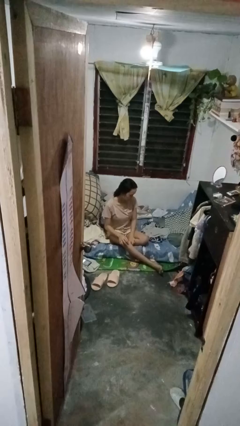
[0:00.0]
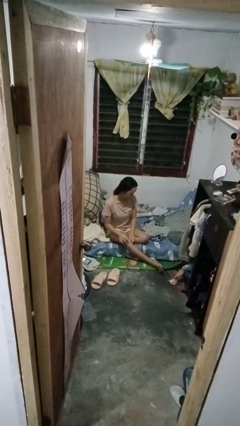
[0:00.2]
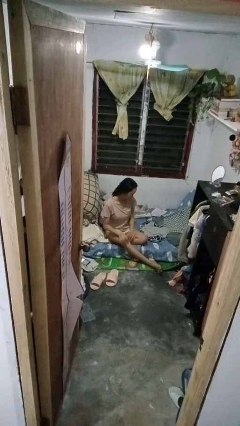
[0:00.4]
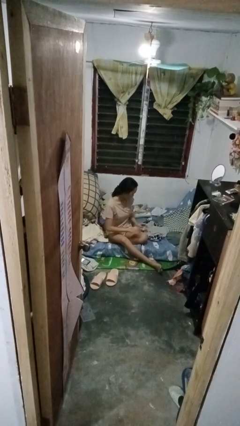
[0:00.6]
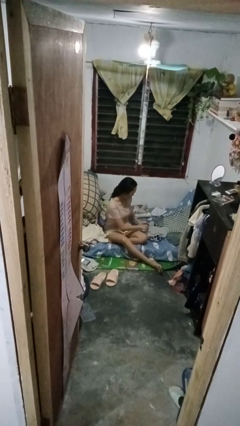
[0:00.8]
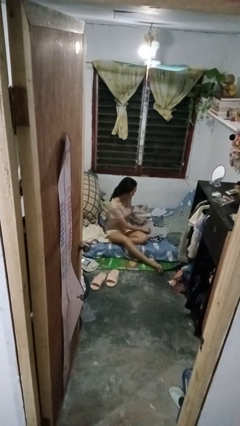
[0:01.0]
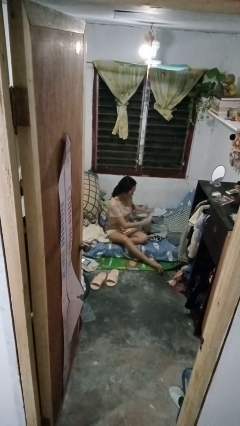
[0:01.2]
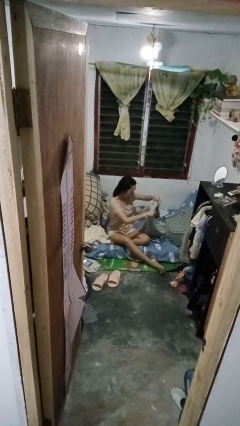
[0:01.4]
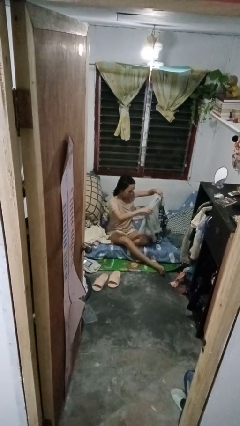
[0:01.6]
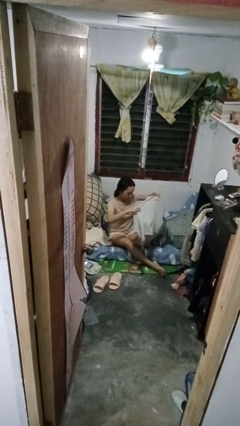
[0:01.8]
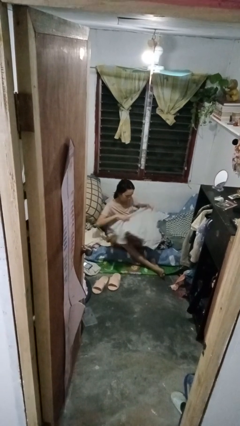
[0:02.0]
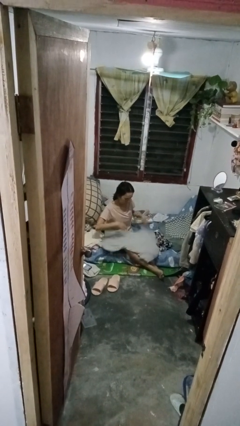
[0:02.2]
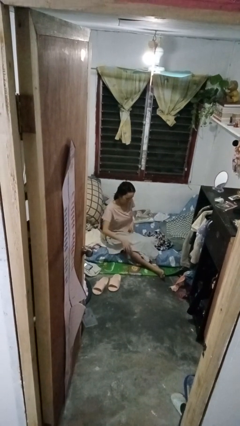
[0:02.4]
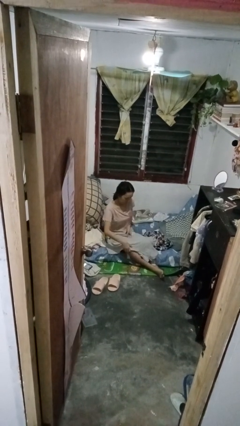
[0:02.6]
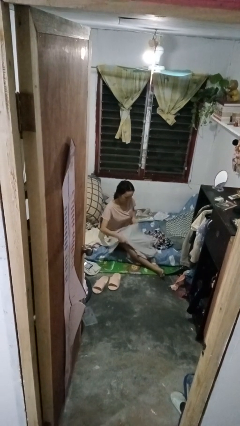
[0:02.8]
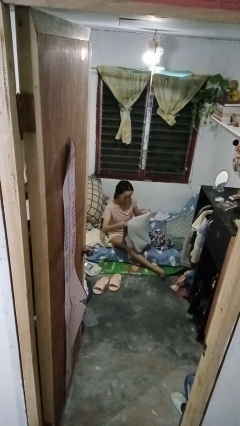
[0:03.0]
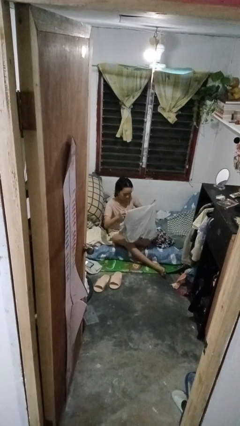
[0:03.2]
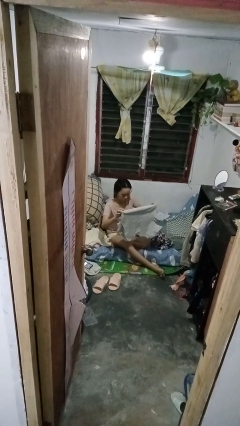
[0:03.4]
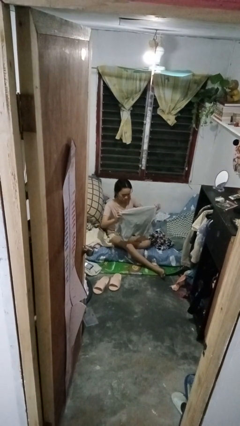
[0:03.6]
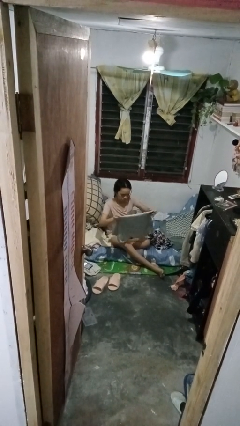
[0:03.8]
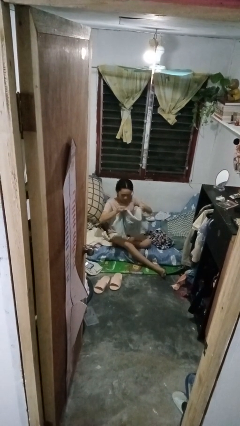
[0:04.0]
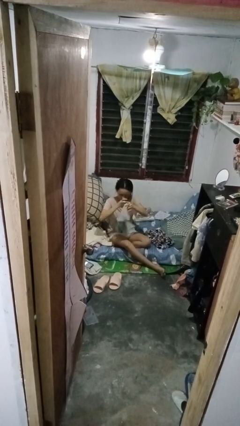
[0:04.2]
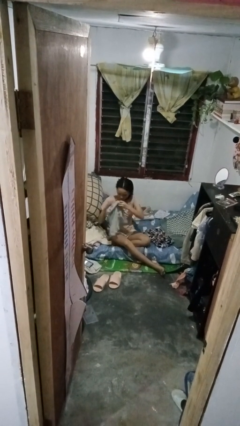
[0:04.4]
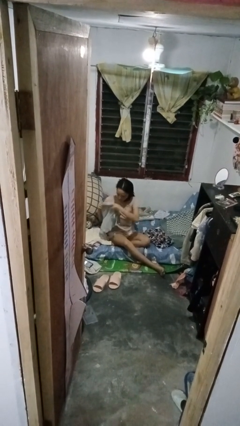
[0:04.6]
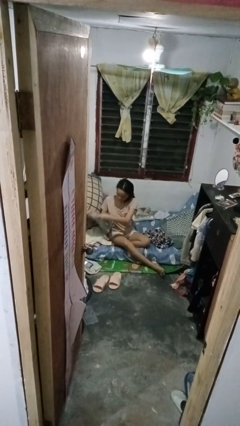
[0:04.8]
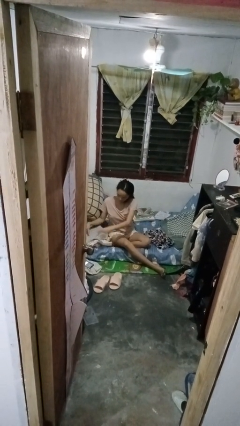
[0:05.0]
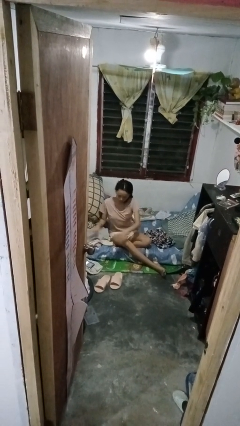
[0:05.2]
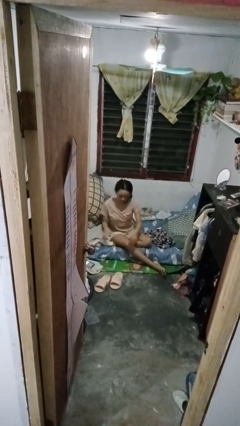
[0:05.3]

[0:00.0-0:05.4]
person folds shirt

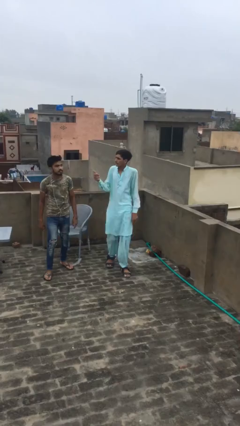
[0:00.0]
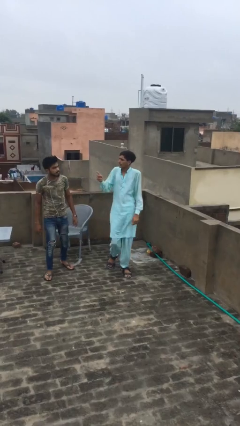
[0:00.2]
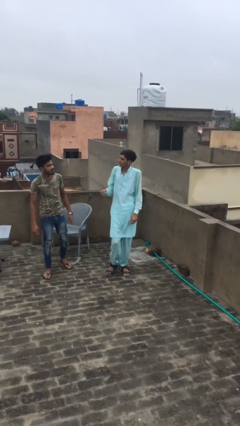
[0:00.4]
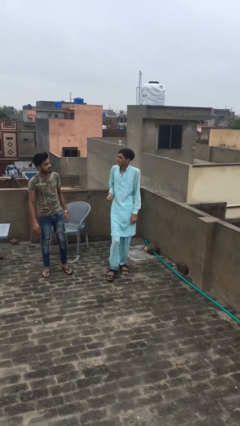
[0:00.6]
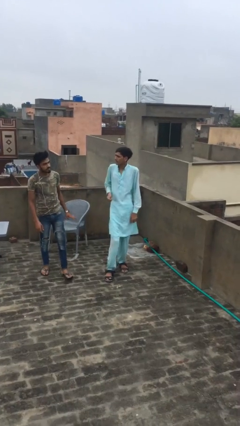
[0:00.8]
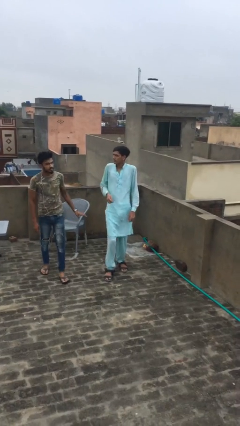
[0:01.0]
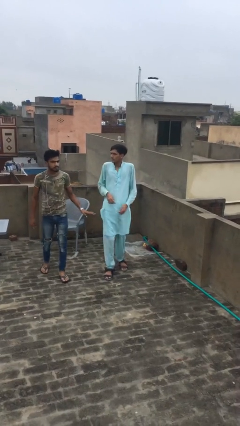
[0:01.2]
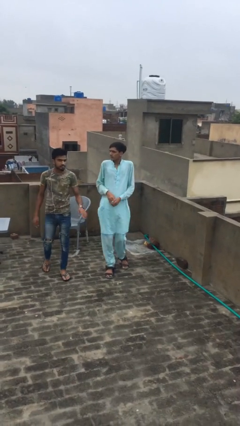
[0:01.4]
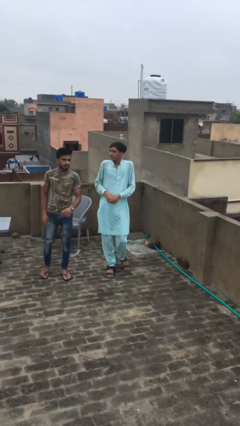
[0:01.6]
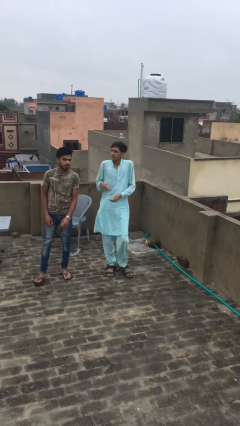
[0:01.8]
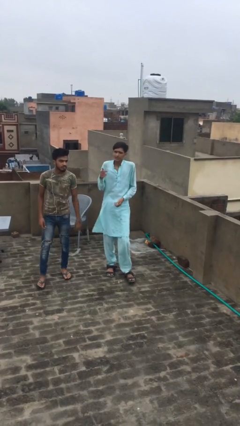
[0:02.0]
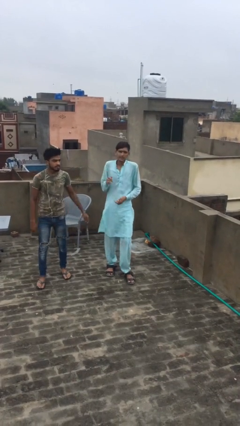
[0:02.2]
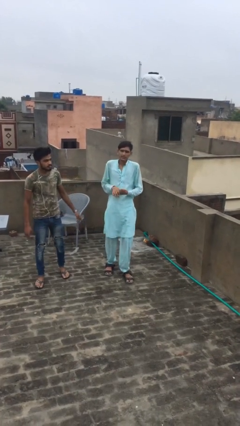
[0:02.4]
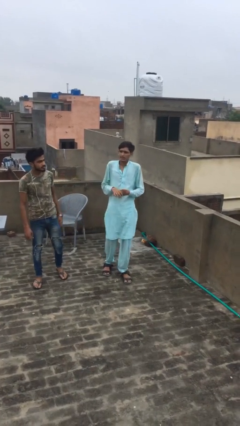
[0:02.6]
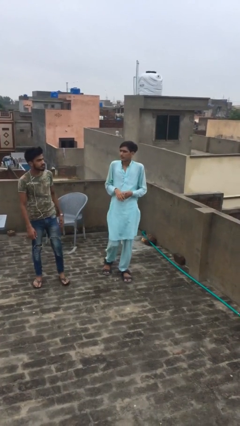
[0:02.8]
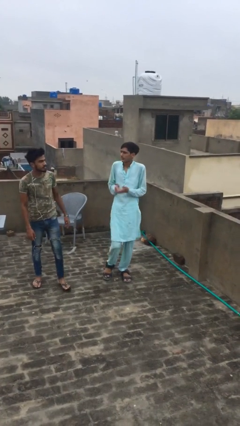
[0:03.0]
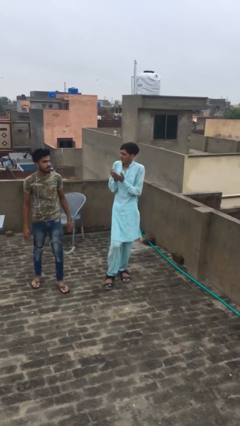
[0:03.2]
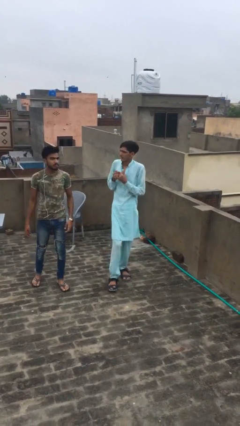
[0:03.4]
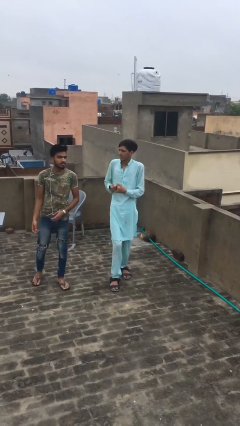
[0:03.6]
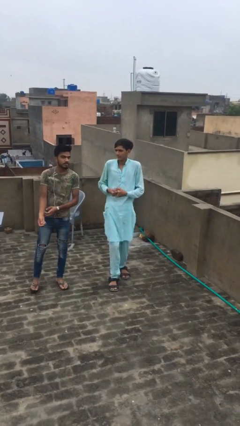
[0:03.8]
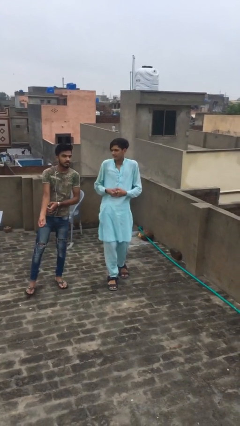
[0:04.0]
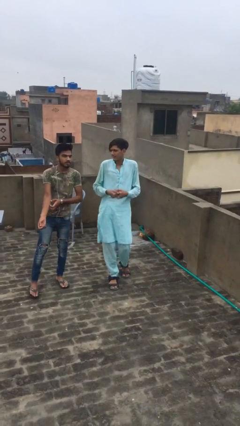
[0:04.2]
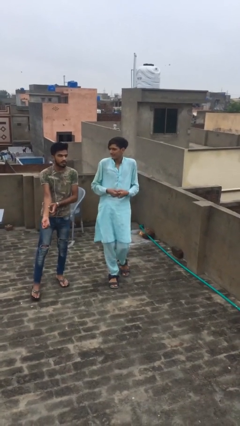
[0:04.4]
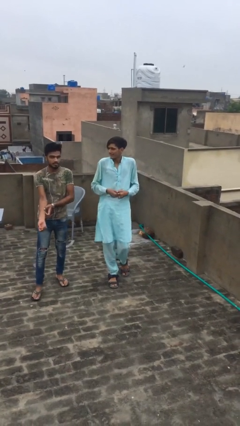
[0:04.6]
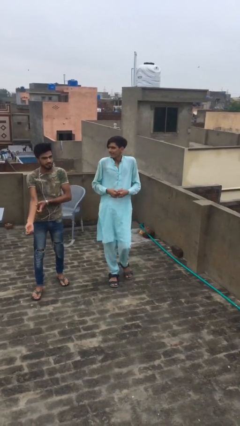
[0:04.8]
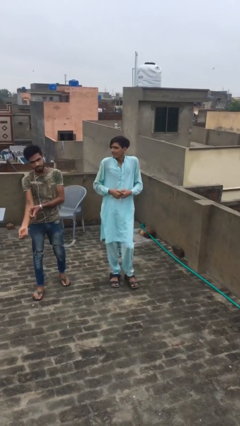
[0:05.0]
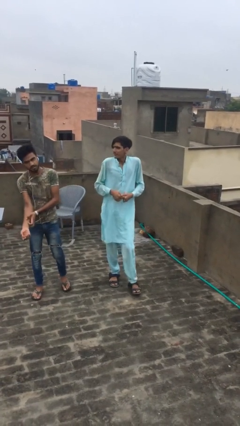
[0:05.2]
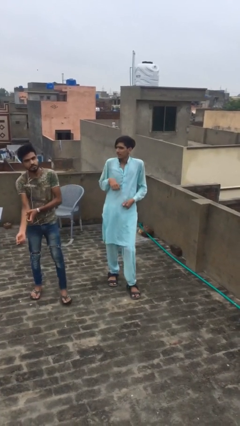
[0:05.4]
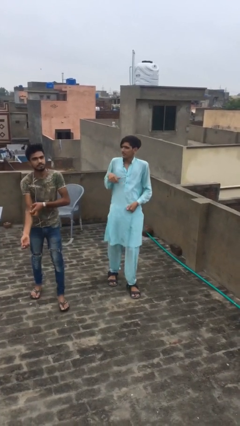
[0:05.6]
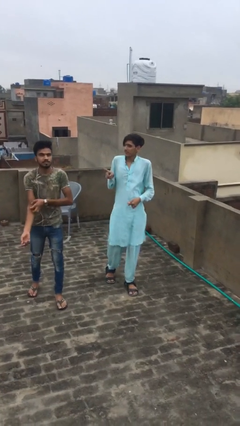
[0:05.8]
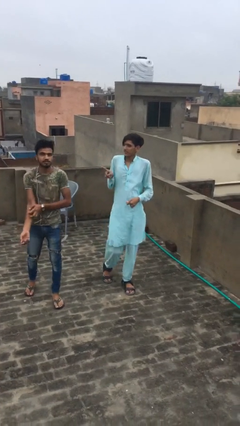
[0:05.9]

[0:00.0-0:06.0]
person talks to person

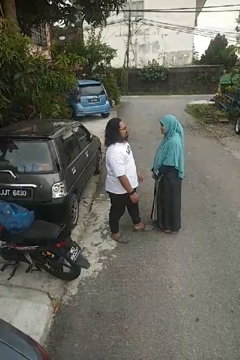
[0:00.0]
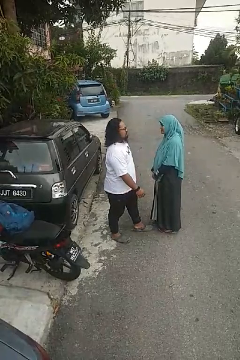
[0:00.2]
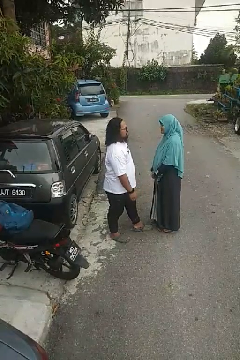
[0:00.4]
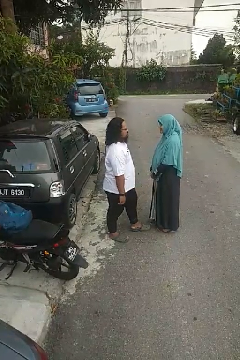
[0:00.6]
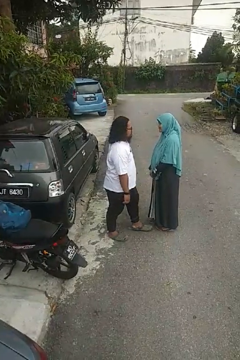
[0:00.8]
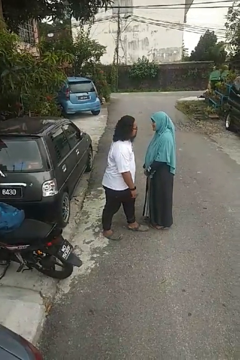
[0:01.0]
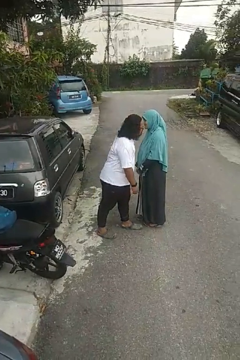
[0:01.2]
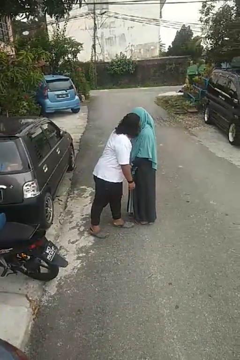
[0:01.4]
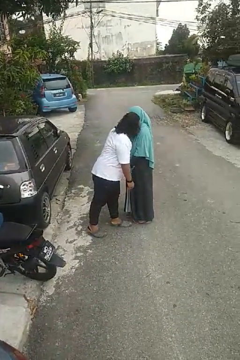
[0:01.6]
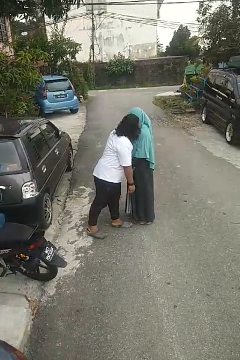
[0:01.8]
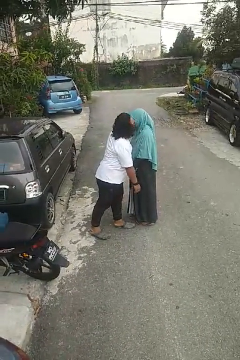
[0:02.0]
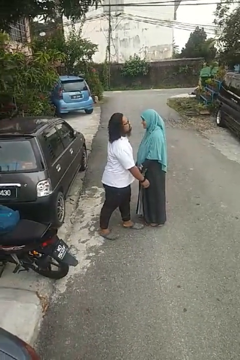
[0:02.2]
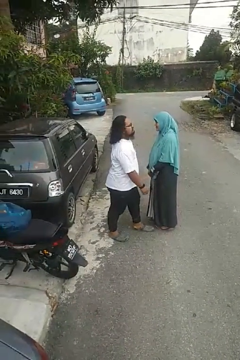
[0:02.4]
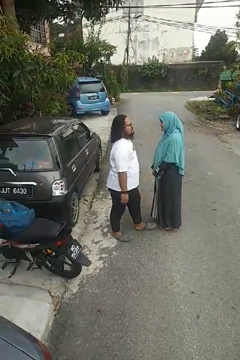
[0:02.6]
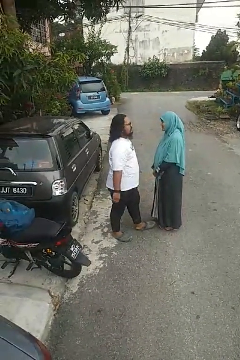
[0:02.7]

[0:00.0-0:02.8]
person kisses cheek of person

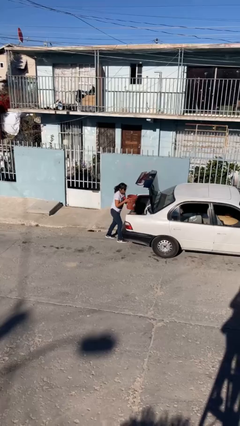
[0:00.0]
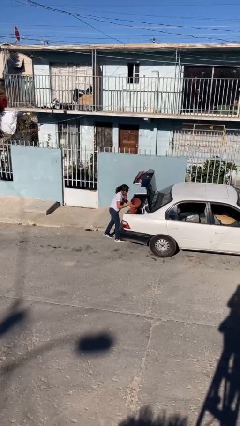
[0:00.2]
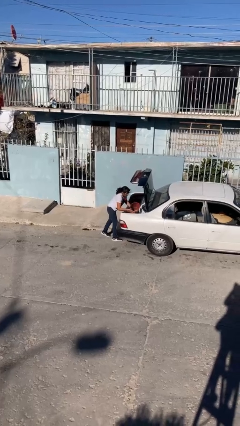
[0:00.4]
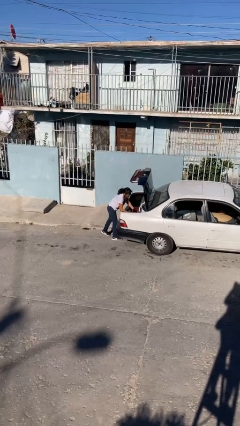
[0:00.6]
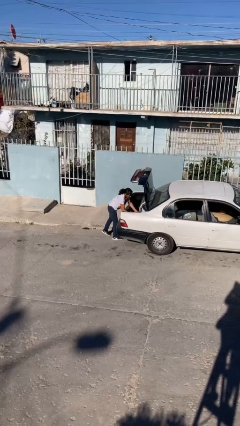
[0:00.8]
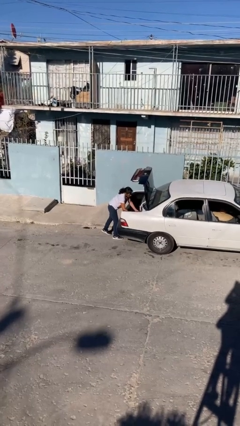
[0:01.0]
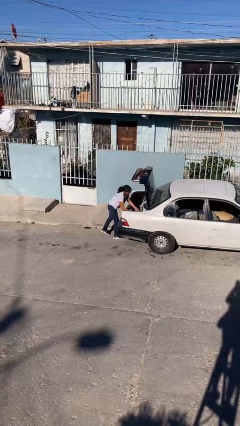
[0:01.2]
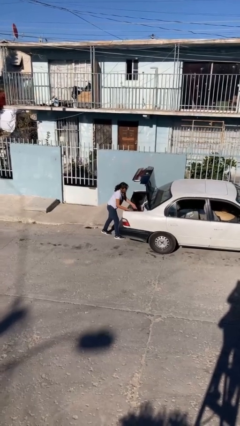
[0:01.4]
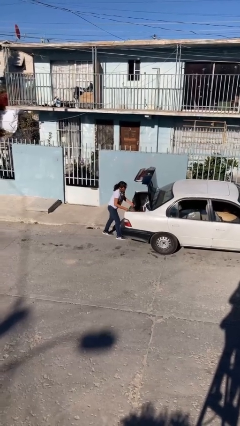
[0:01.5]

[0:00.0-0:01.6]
person loads car

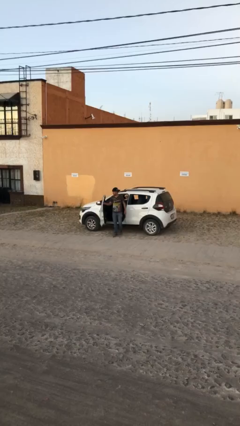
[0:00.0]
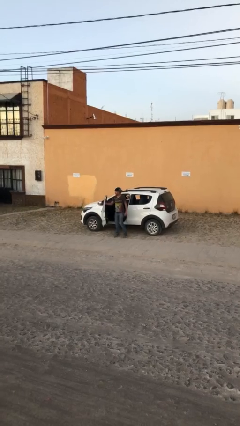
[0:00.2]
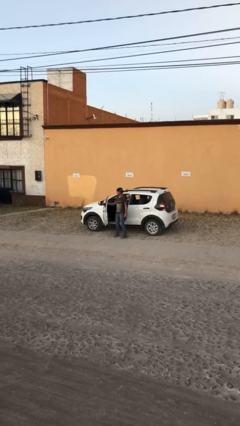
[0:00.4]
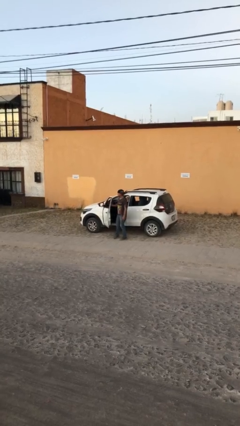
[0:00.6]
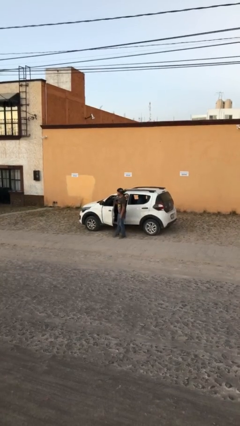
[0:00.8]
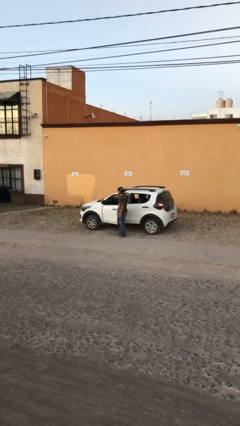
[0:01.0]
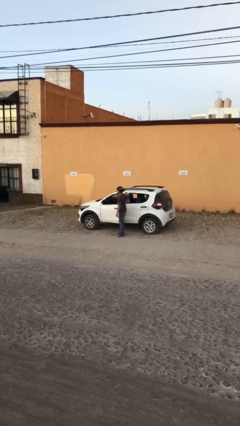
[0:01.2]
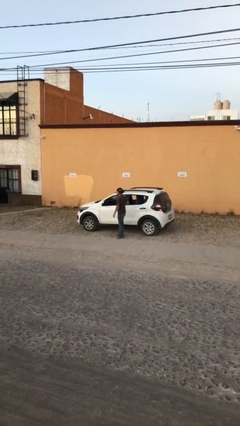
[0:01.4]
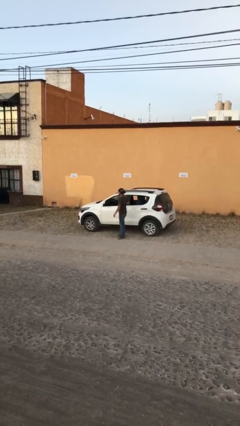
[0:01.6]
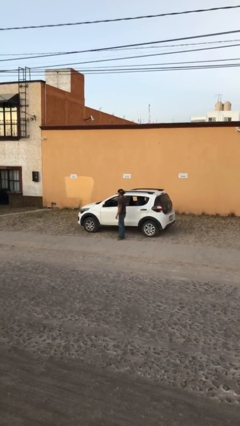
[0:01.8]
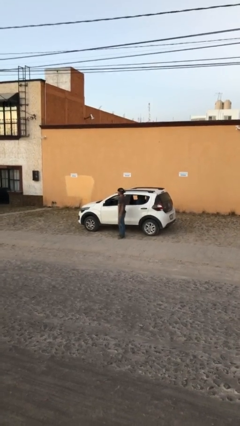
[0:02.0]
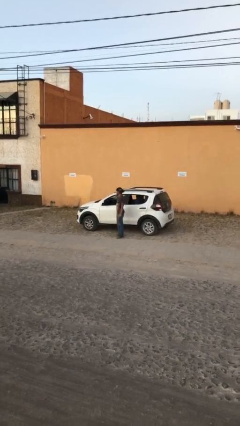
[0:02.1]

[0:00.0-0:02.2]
person closes car door
